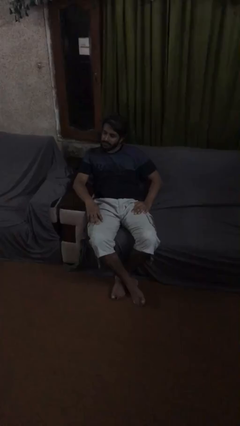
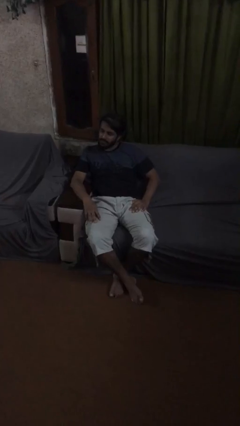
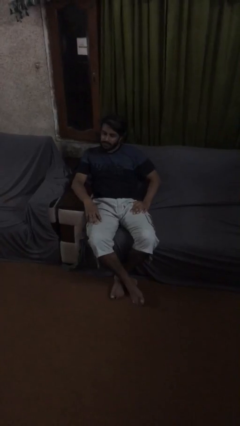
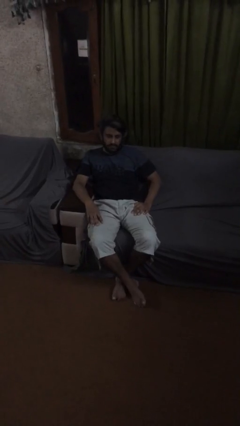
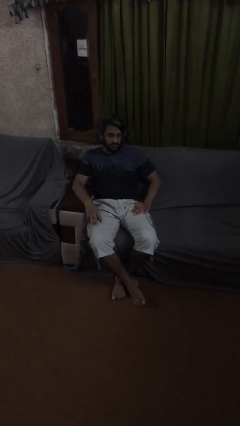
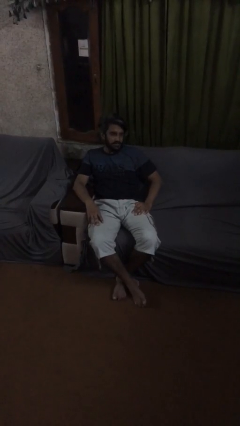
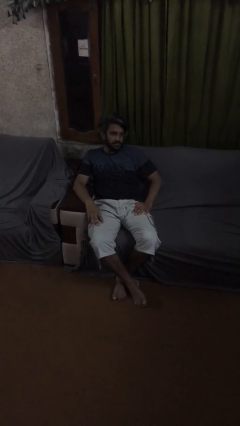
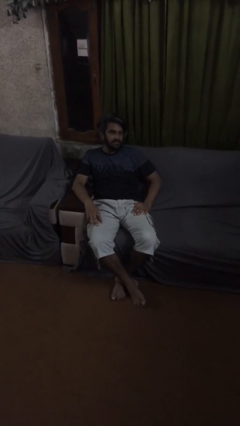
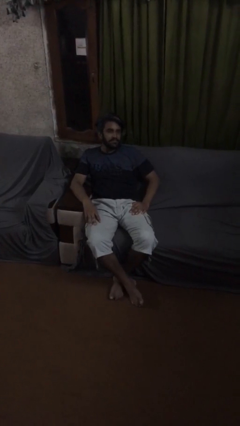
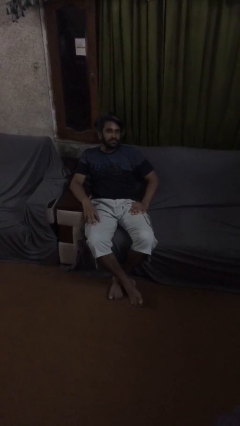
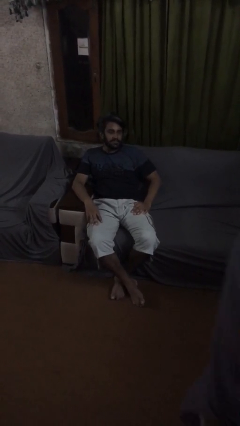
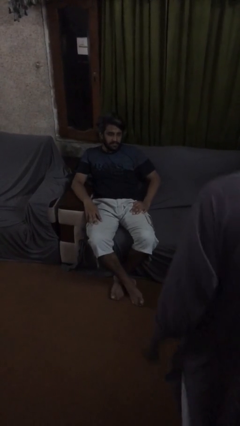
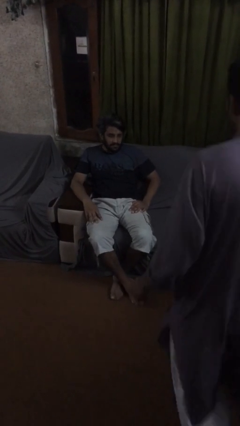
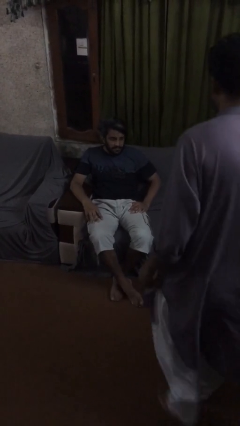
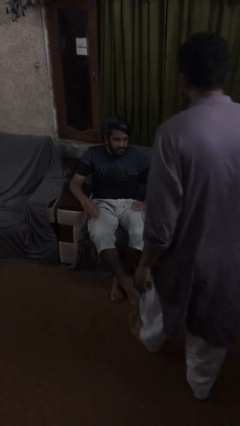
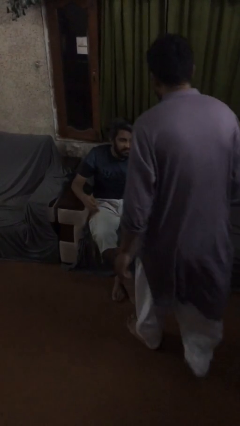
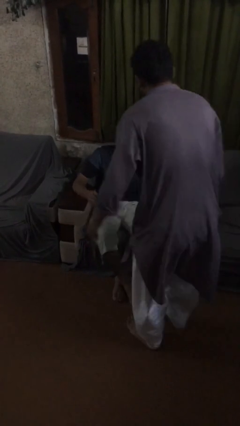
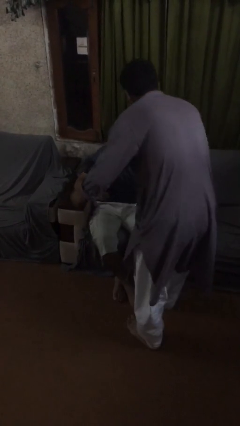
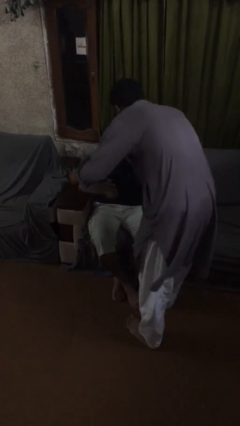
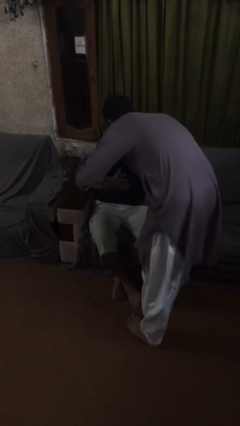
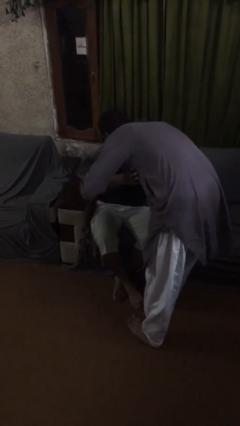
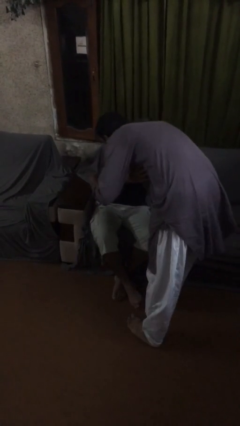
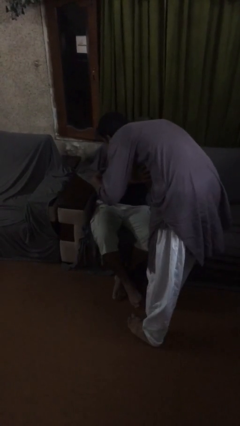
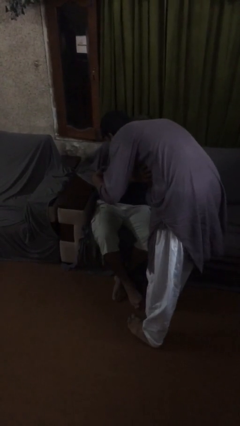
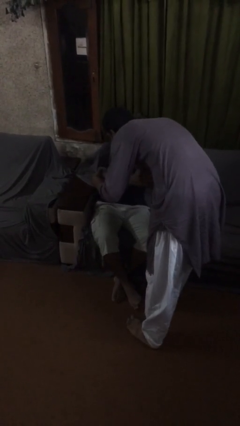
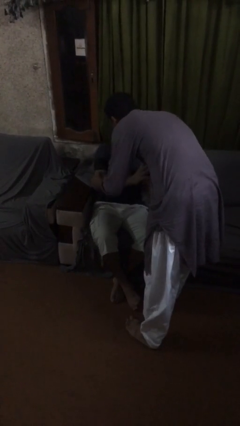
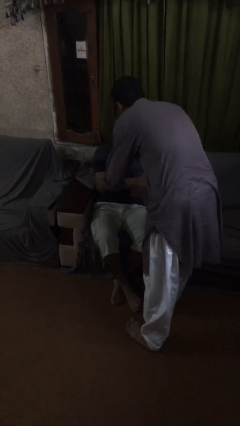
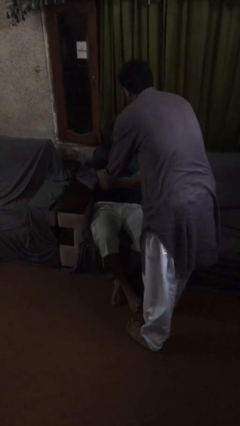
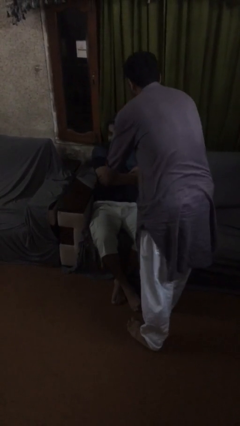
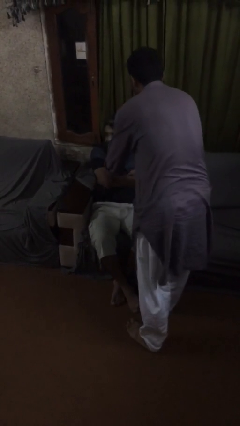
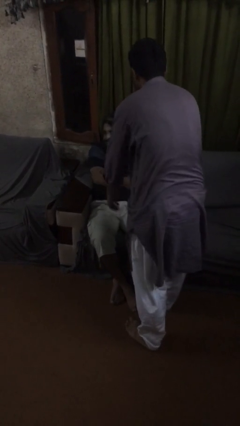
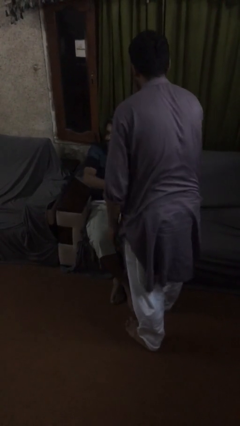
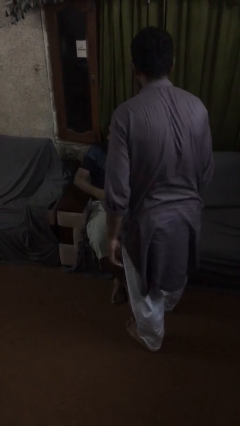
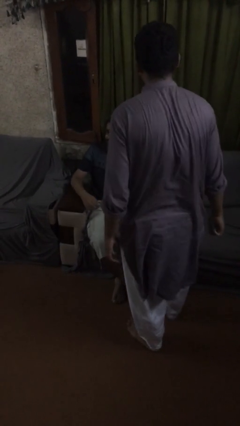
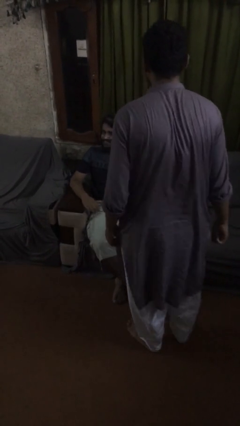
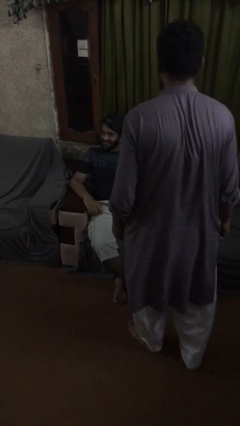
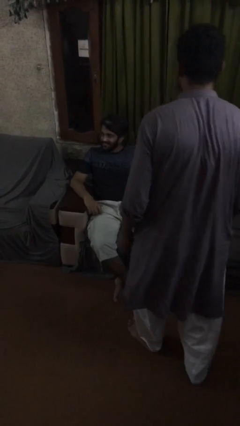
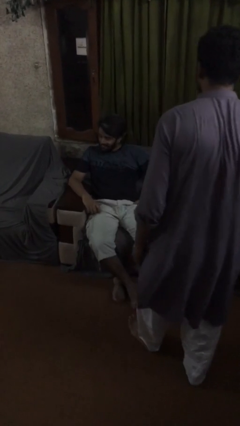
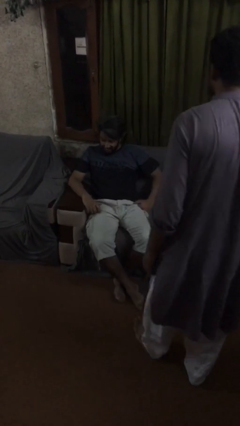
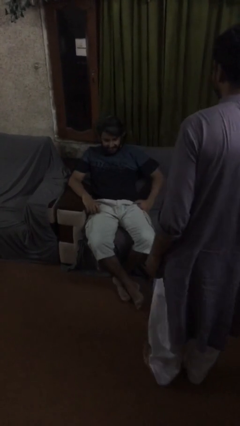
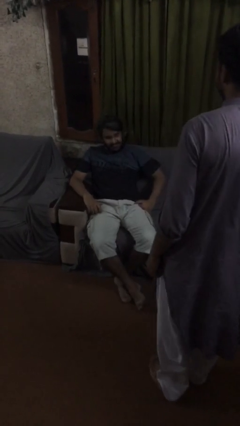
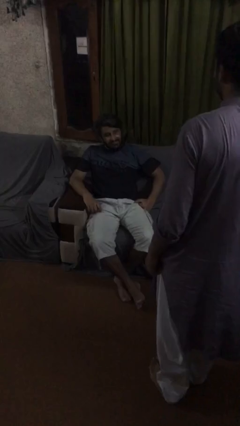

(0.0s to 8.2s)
person embraces person

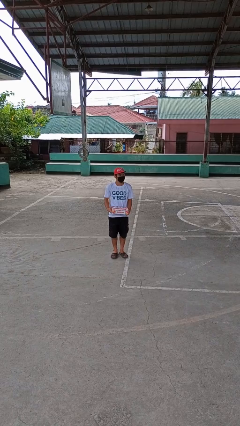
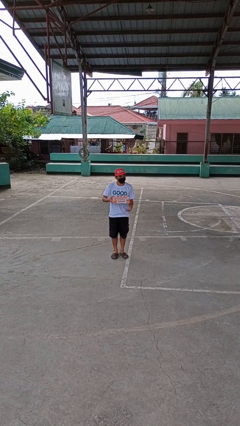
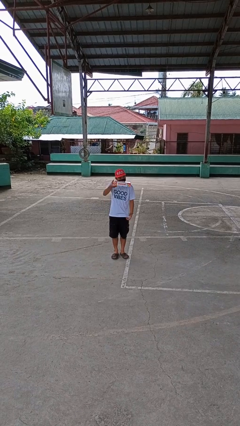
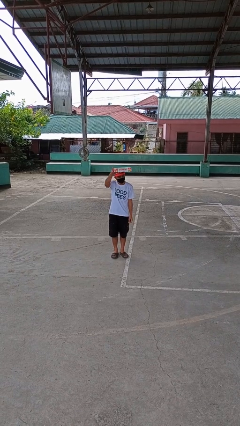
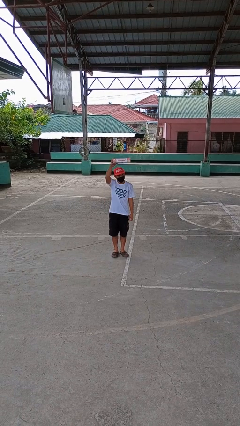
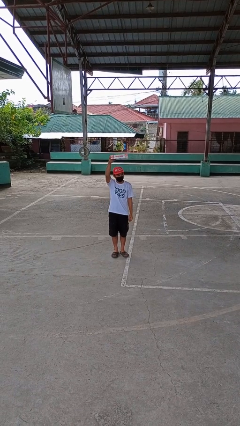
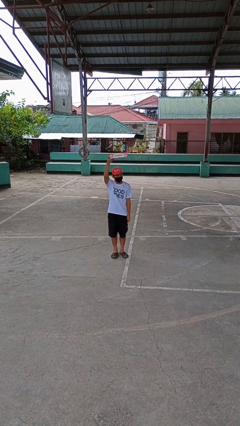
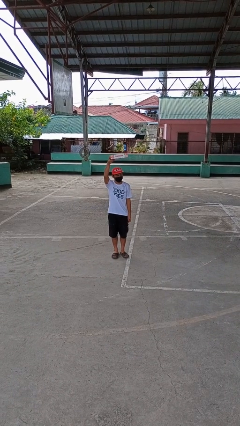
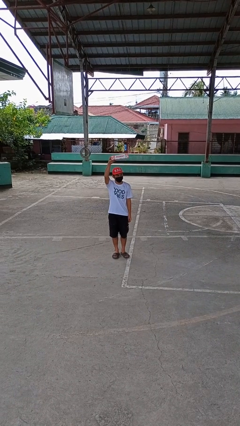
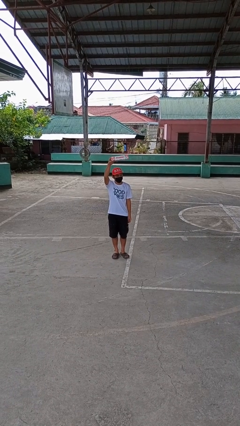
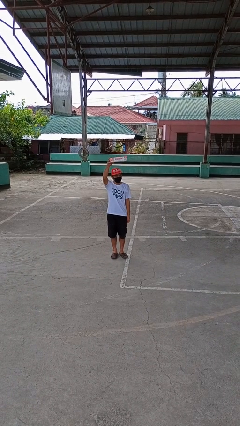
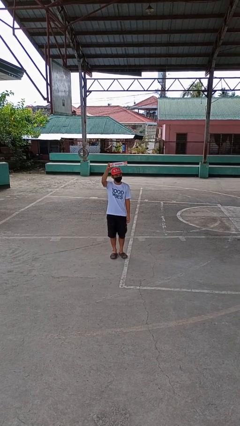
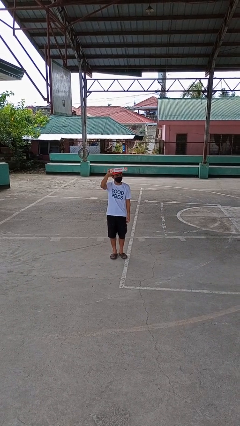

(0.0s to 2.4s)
person holds object above head

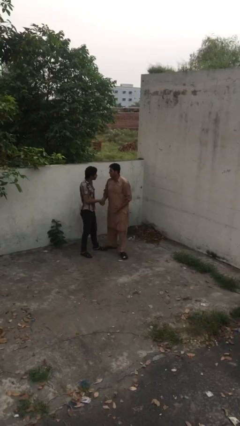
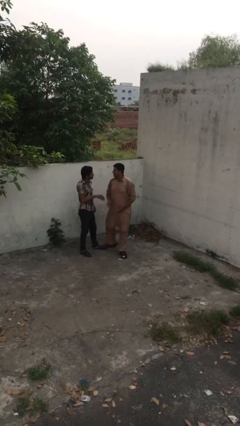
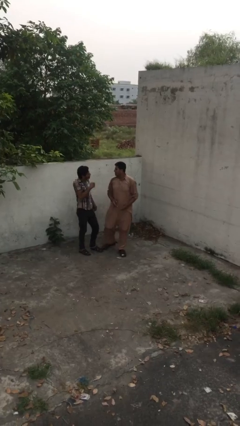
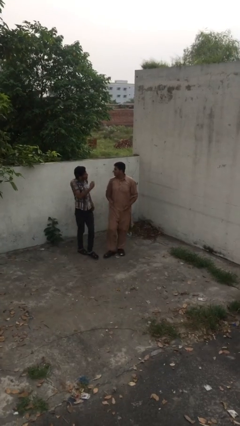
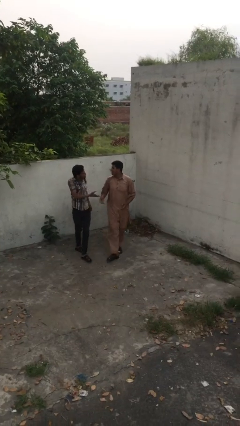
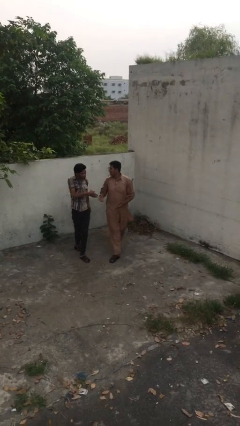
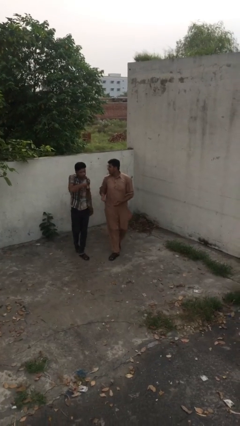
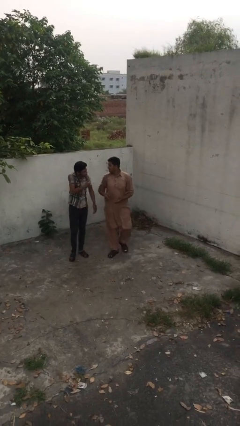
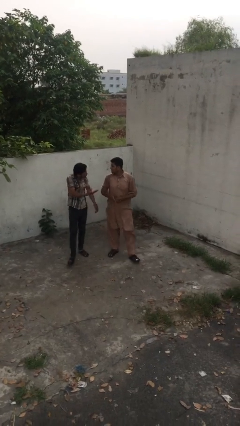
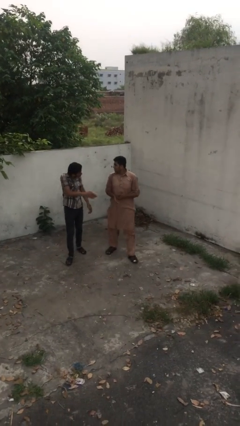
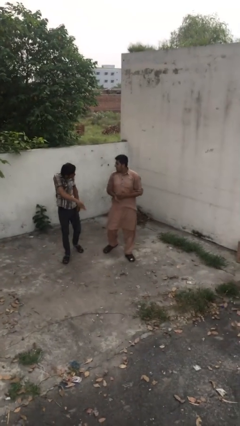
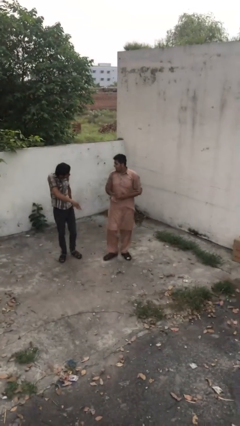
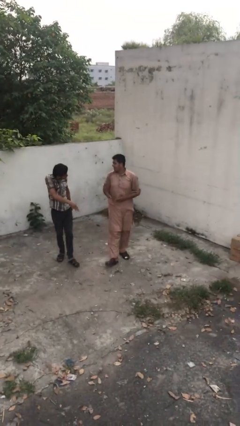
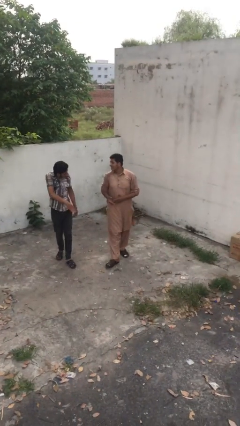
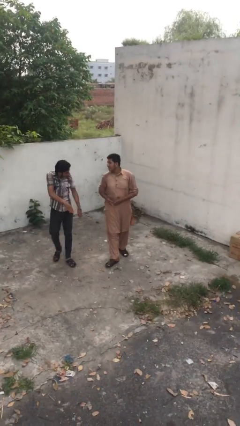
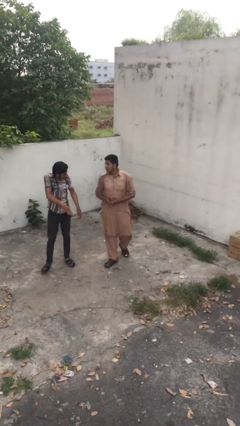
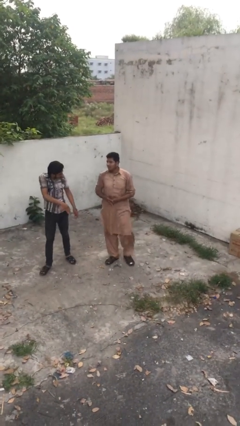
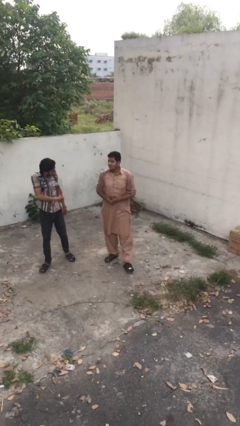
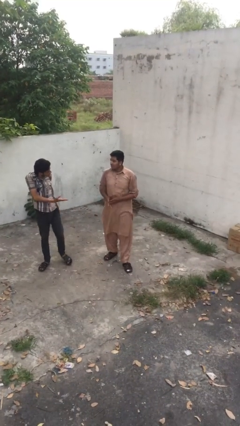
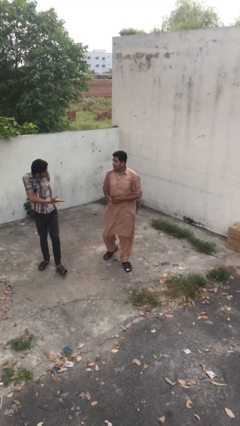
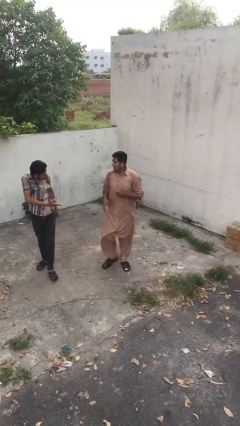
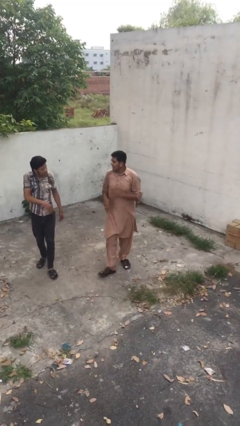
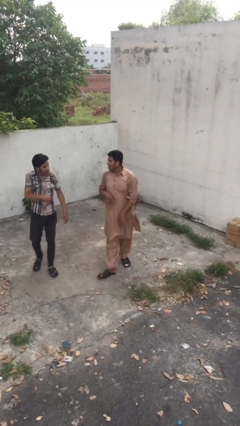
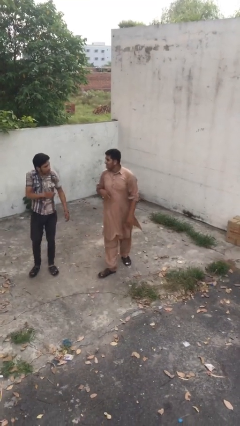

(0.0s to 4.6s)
person talks to person

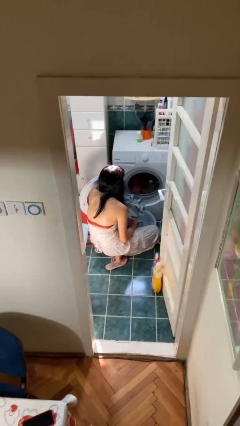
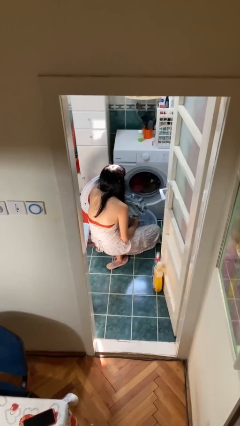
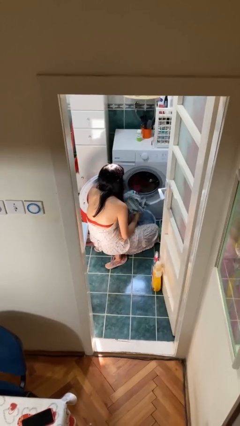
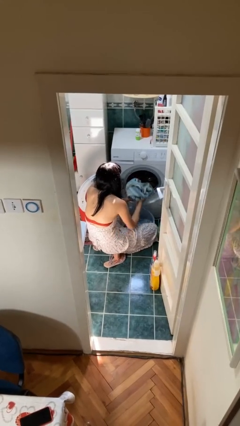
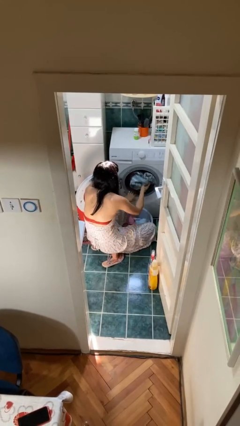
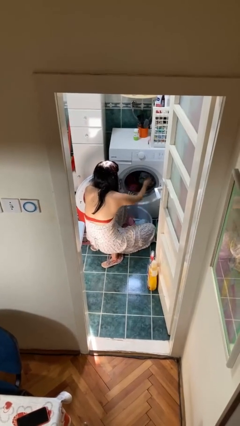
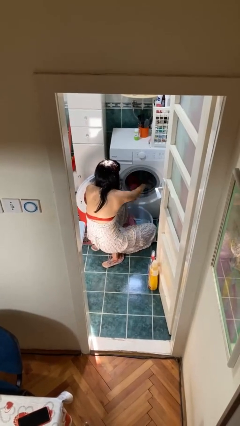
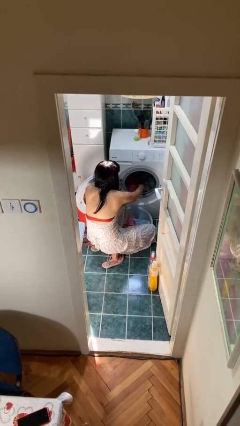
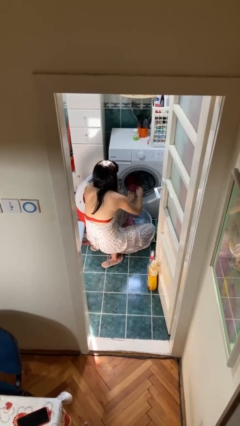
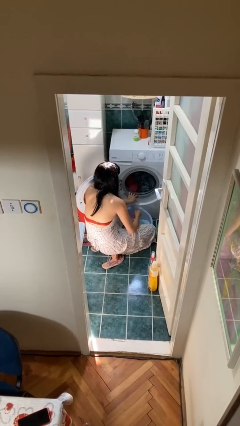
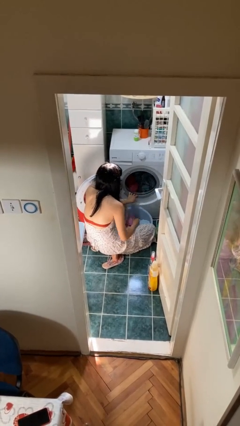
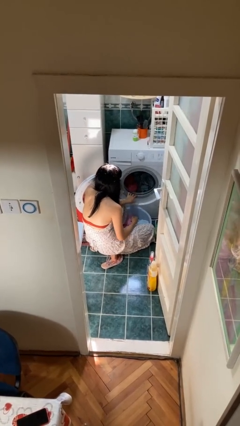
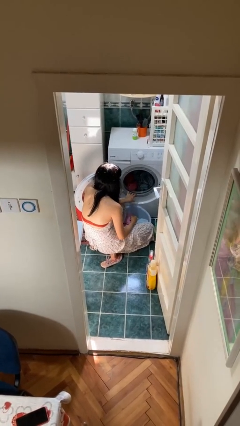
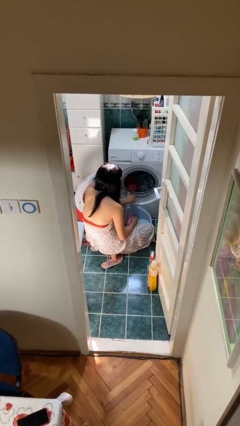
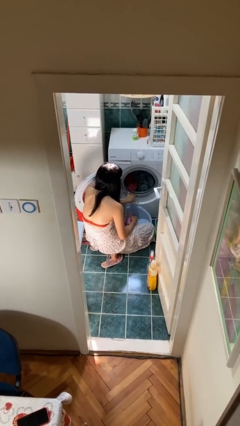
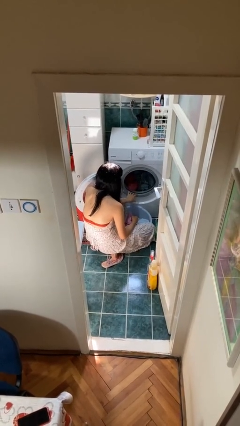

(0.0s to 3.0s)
person loads clotheswasher
